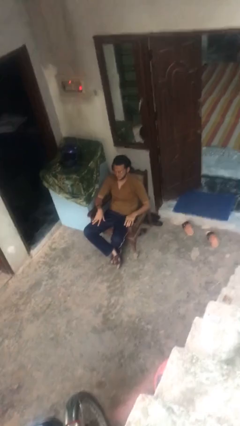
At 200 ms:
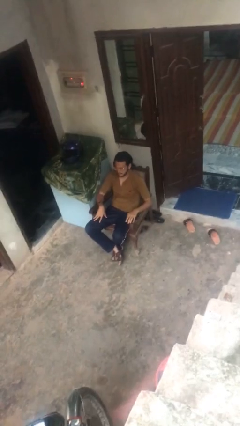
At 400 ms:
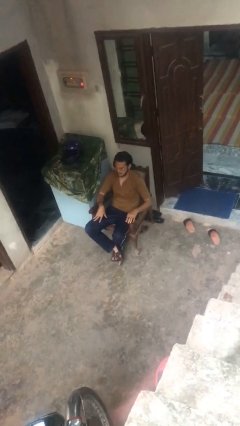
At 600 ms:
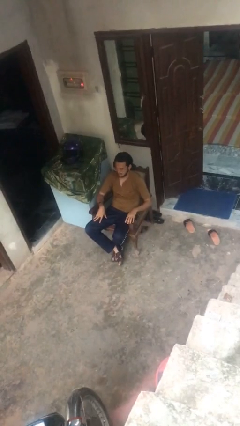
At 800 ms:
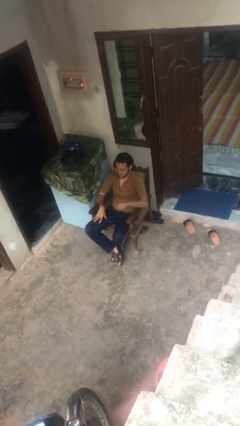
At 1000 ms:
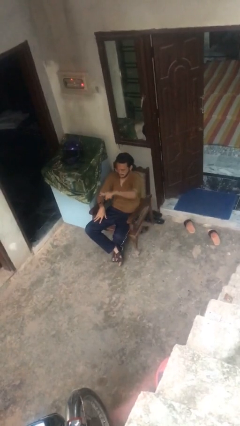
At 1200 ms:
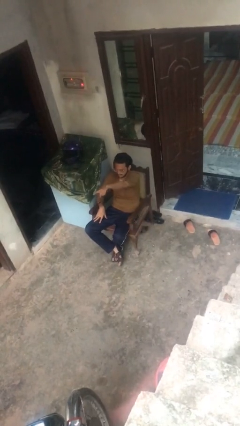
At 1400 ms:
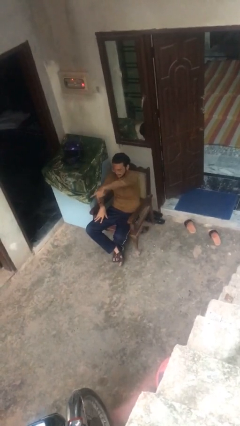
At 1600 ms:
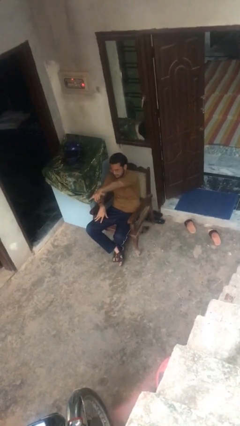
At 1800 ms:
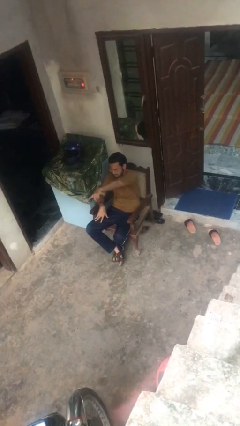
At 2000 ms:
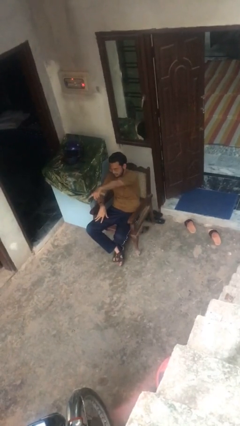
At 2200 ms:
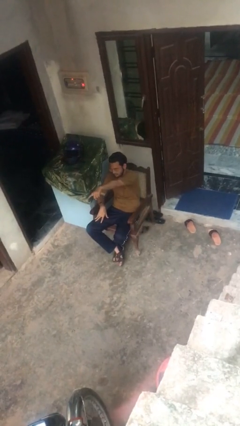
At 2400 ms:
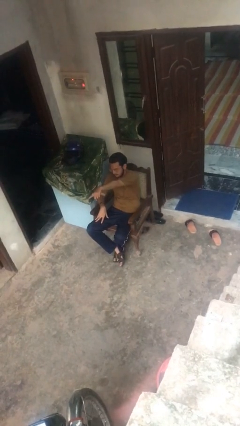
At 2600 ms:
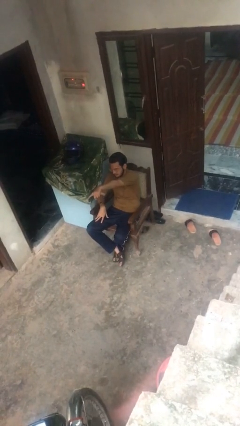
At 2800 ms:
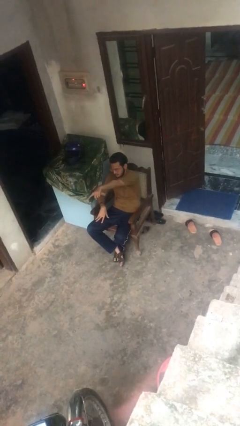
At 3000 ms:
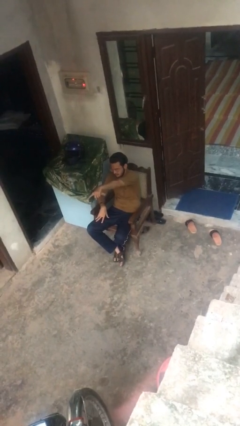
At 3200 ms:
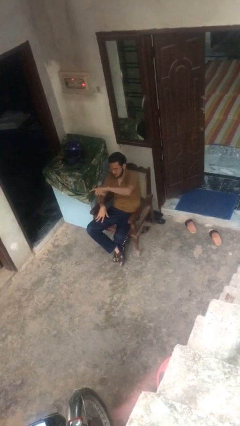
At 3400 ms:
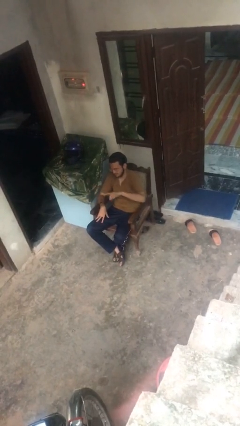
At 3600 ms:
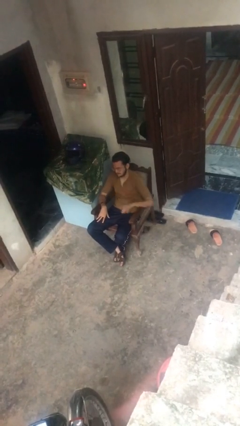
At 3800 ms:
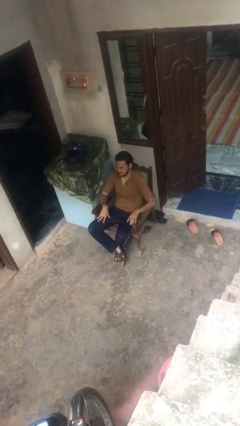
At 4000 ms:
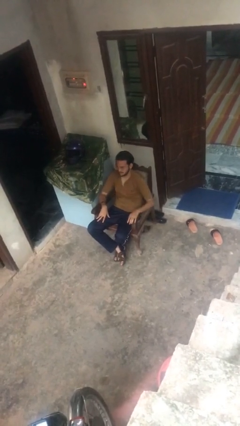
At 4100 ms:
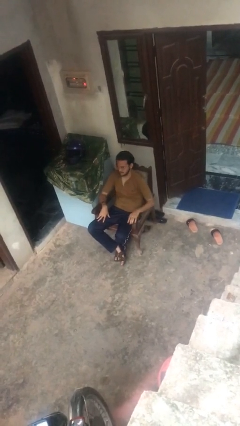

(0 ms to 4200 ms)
person points at person

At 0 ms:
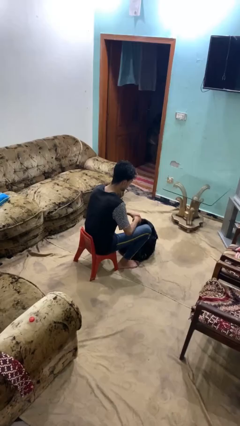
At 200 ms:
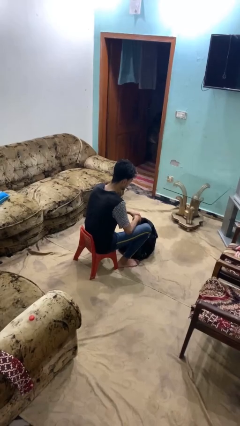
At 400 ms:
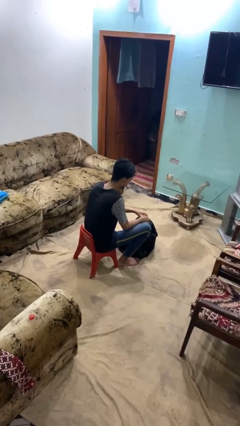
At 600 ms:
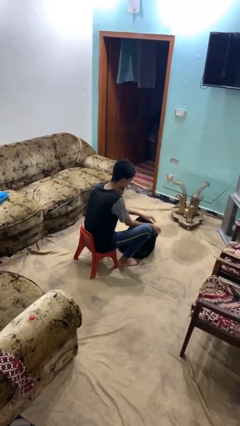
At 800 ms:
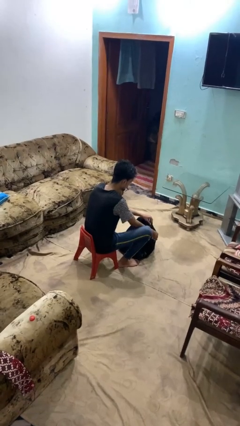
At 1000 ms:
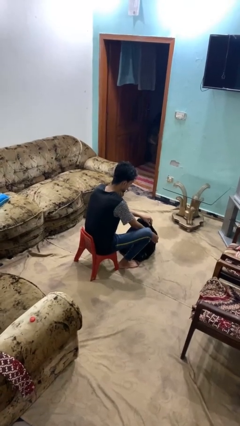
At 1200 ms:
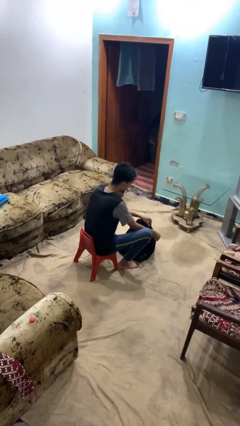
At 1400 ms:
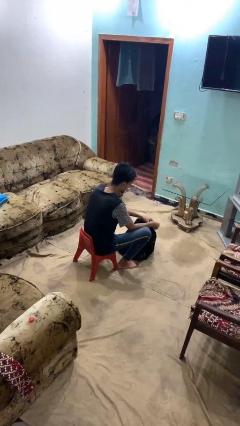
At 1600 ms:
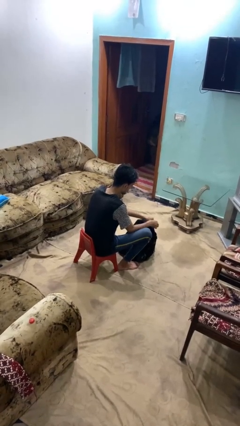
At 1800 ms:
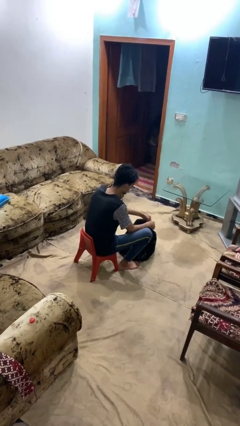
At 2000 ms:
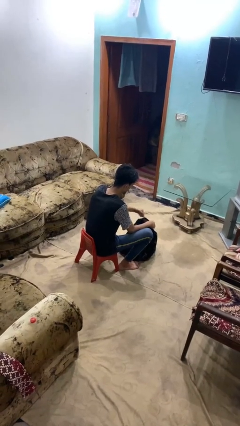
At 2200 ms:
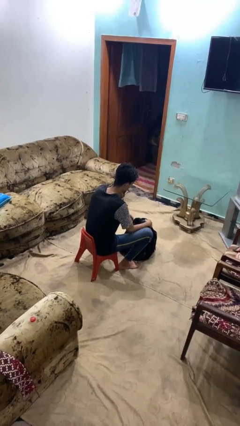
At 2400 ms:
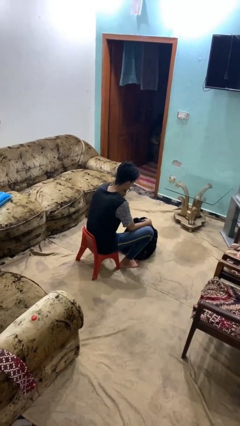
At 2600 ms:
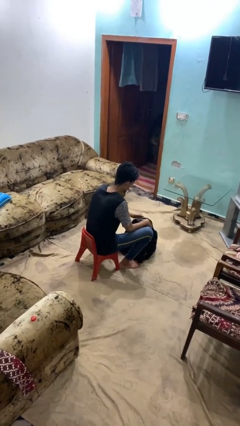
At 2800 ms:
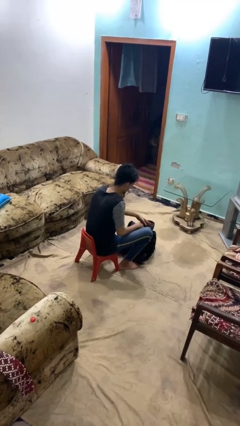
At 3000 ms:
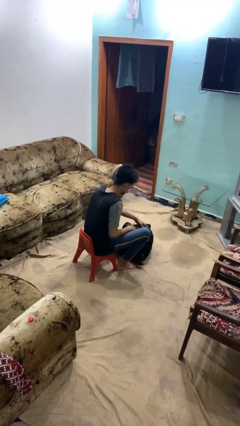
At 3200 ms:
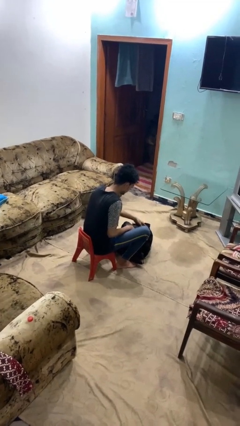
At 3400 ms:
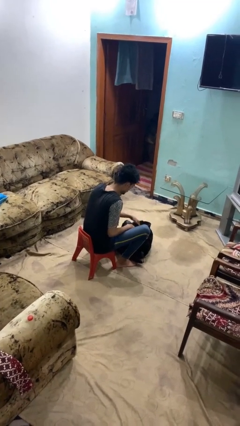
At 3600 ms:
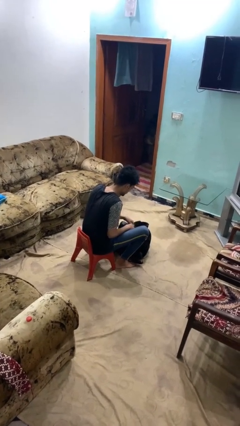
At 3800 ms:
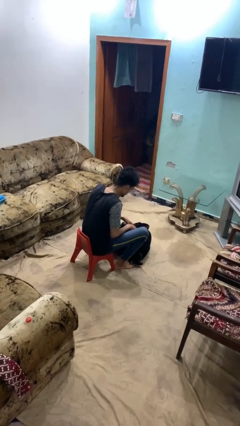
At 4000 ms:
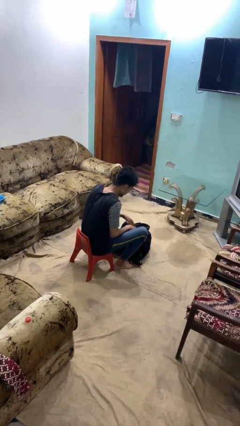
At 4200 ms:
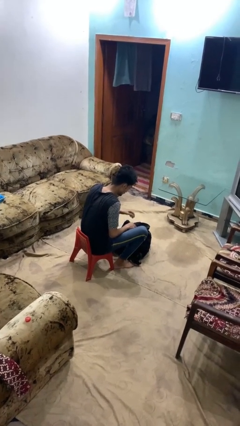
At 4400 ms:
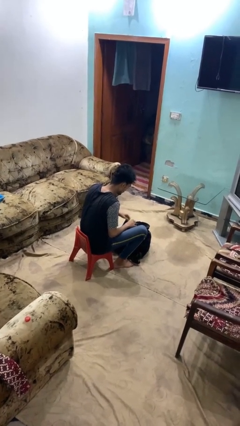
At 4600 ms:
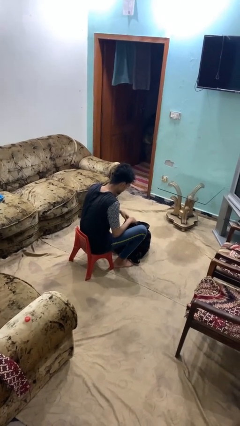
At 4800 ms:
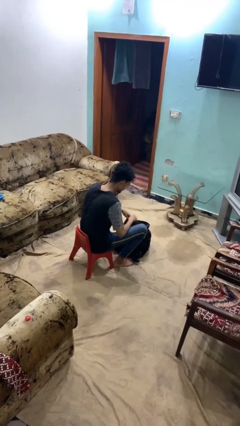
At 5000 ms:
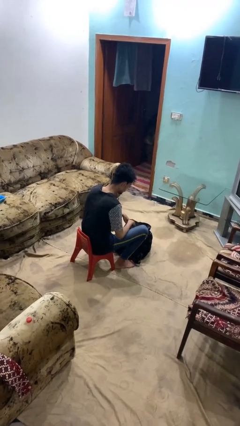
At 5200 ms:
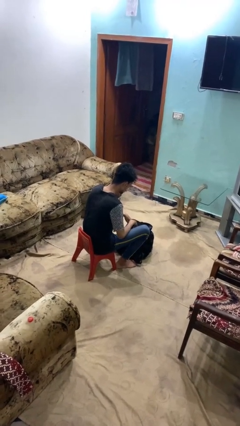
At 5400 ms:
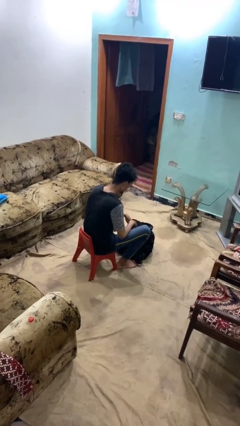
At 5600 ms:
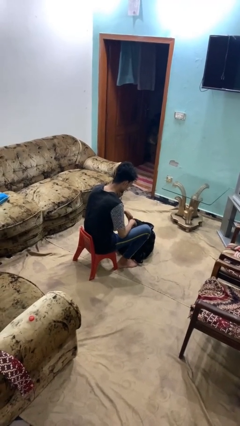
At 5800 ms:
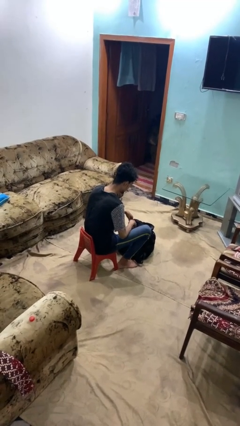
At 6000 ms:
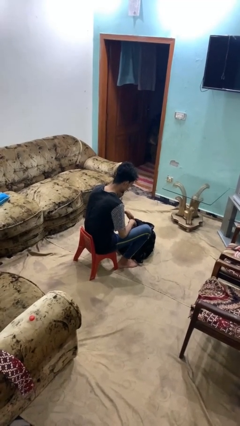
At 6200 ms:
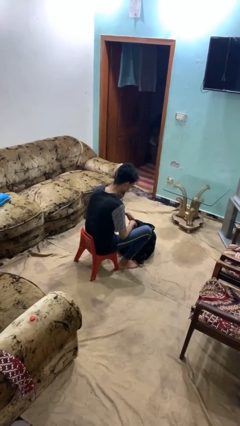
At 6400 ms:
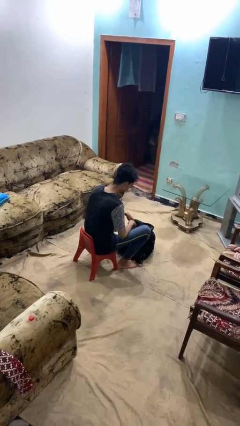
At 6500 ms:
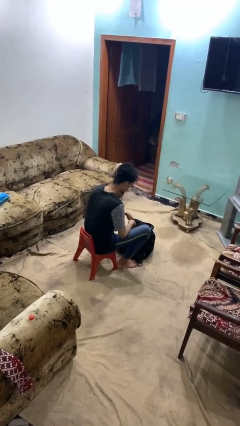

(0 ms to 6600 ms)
person puts on backpack

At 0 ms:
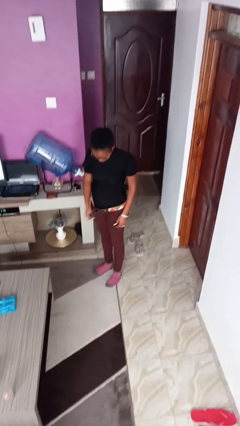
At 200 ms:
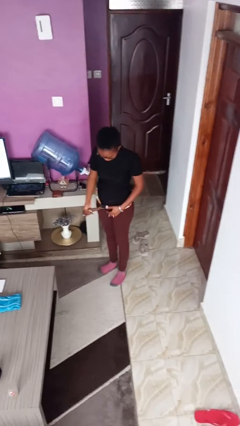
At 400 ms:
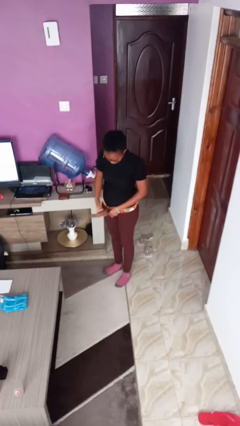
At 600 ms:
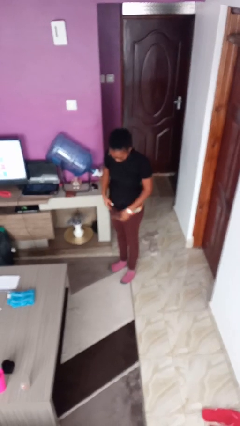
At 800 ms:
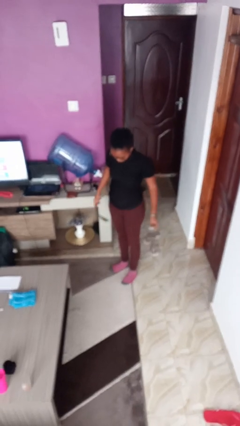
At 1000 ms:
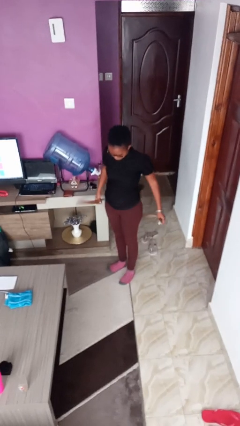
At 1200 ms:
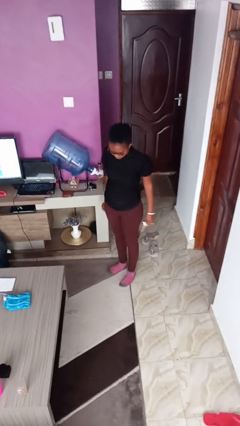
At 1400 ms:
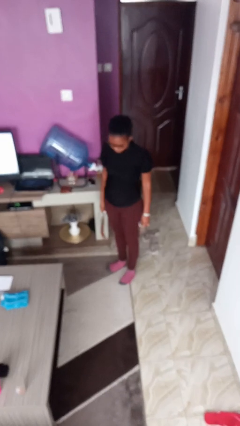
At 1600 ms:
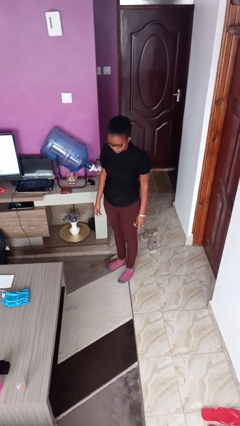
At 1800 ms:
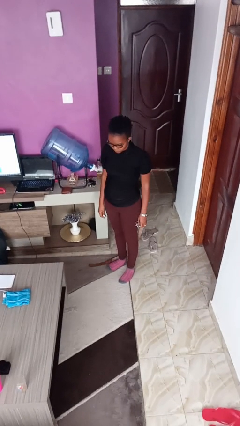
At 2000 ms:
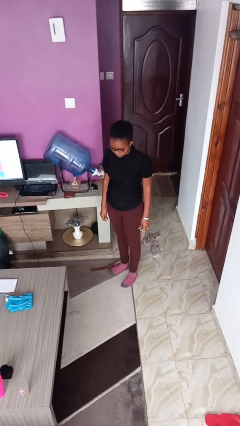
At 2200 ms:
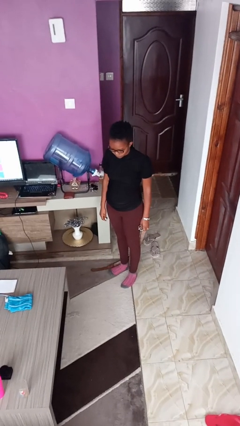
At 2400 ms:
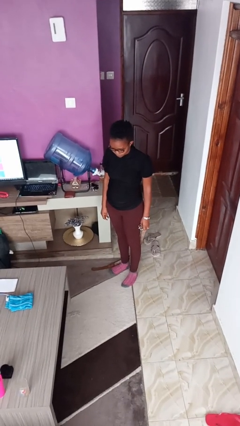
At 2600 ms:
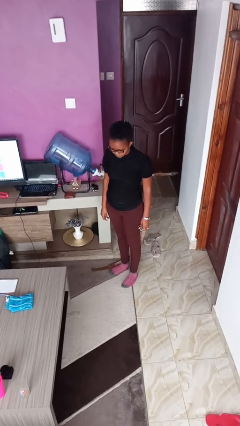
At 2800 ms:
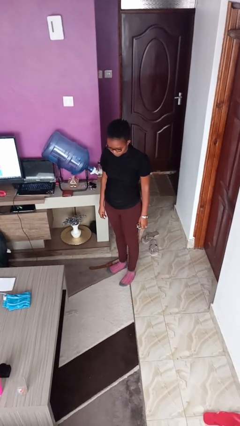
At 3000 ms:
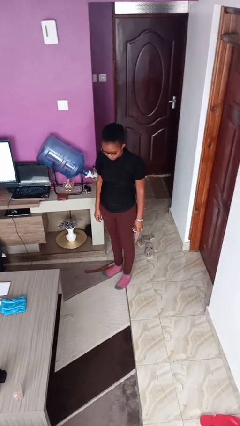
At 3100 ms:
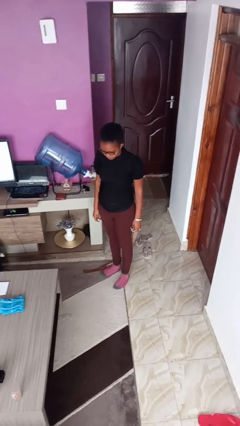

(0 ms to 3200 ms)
person takes off belt

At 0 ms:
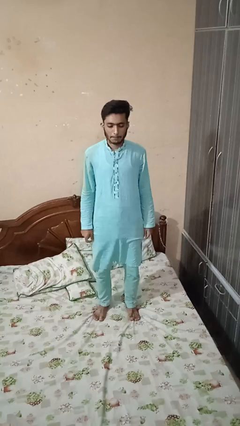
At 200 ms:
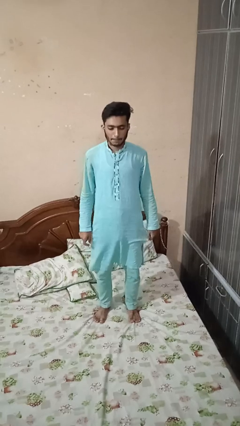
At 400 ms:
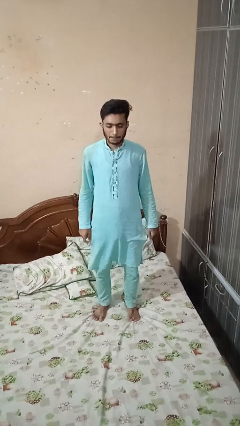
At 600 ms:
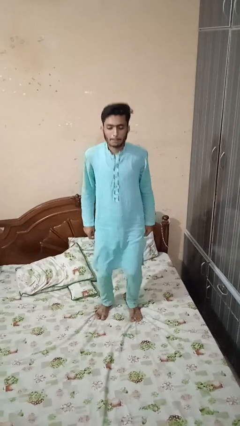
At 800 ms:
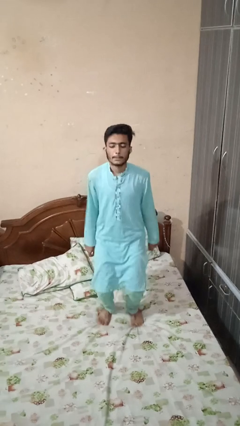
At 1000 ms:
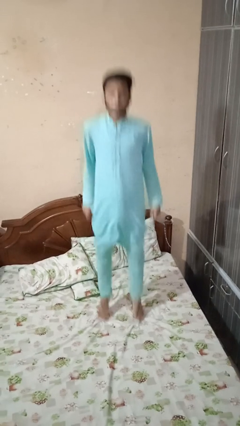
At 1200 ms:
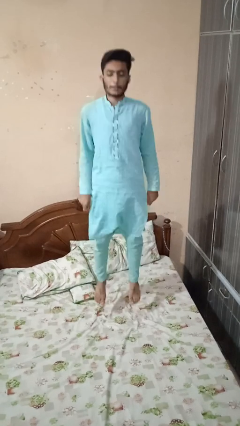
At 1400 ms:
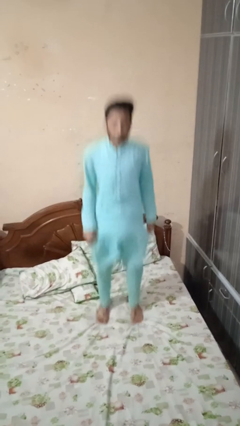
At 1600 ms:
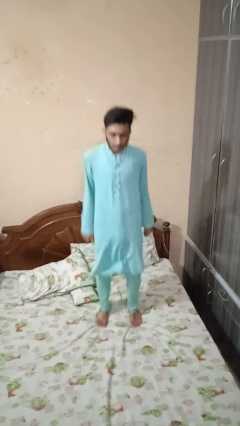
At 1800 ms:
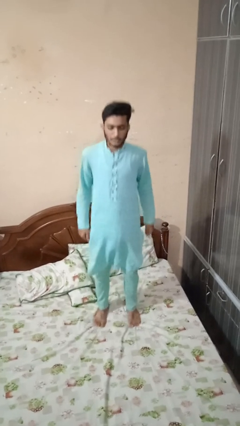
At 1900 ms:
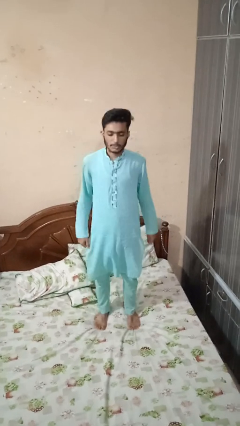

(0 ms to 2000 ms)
person jumps on bed

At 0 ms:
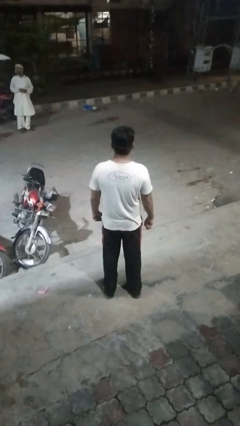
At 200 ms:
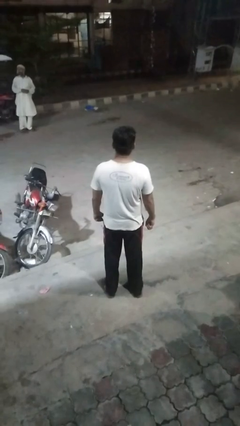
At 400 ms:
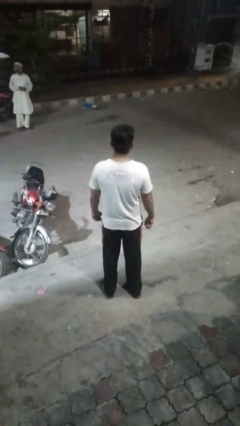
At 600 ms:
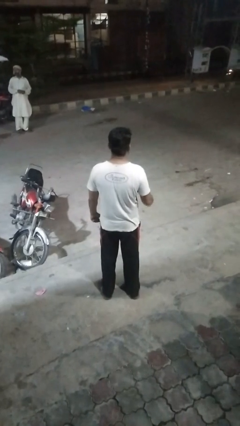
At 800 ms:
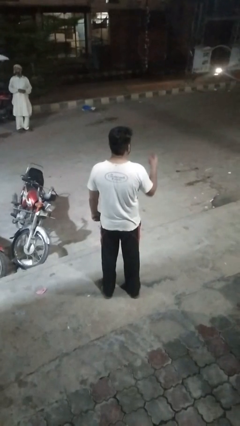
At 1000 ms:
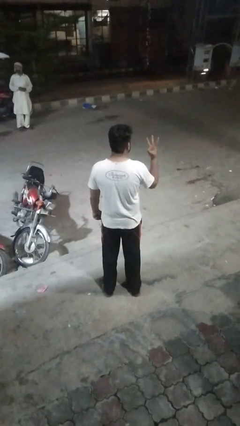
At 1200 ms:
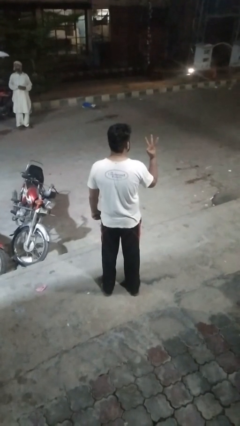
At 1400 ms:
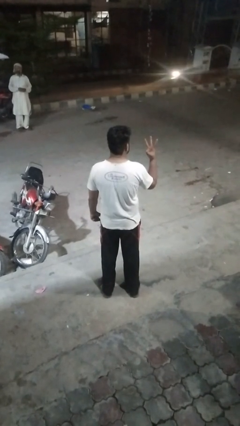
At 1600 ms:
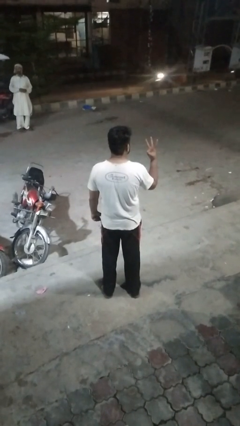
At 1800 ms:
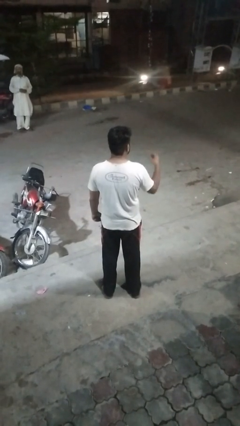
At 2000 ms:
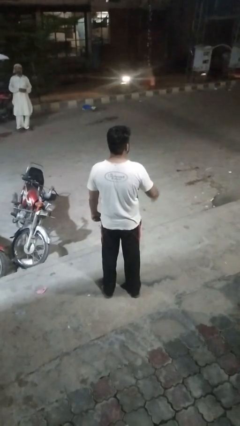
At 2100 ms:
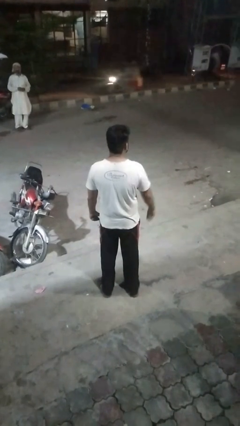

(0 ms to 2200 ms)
person gestures number three
